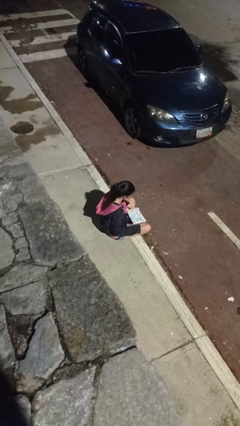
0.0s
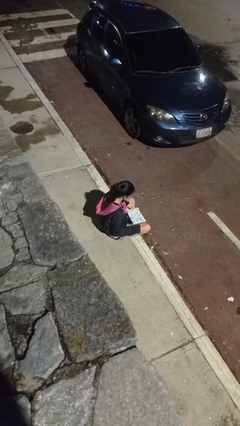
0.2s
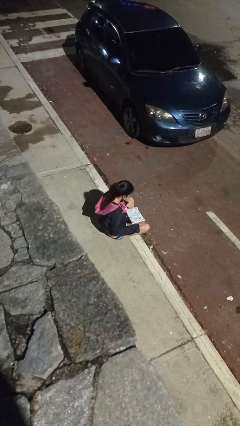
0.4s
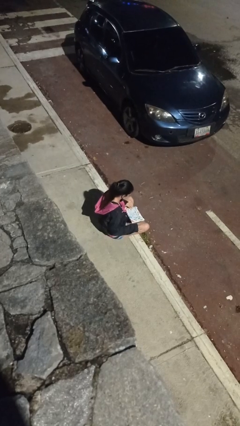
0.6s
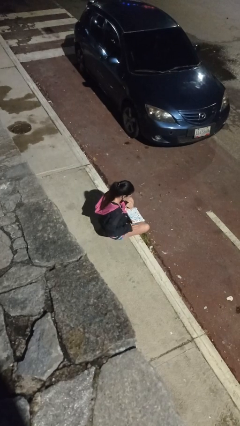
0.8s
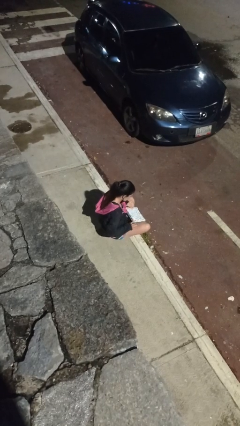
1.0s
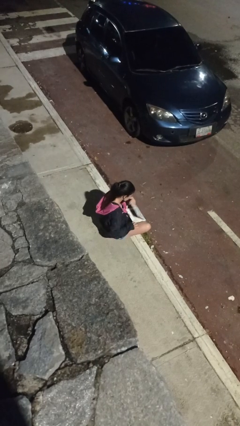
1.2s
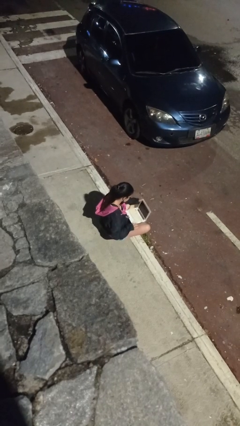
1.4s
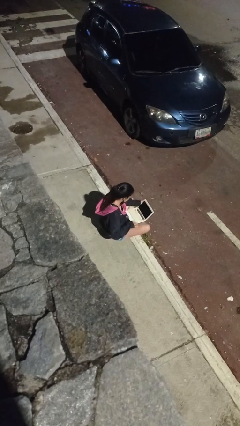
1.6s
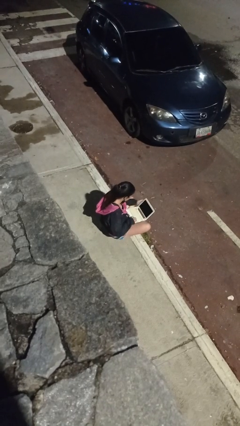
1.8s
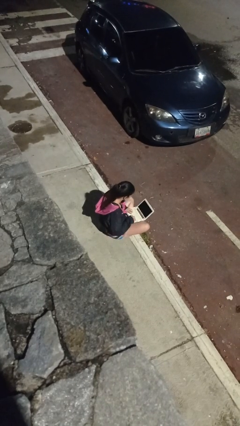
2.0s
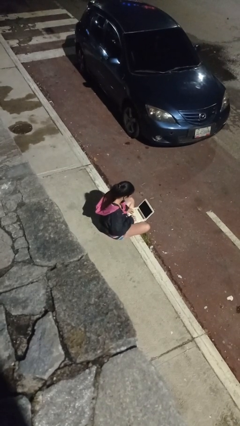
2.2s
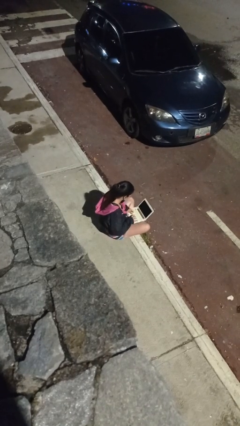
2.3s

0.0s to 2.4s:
person opens laptop

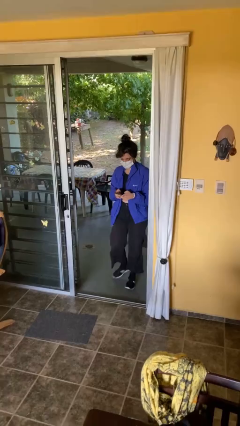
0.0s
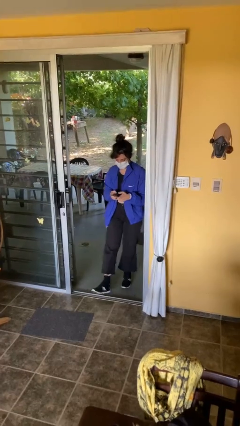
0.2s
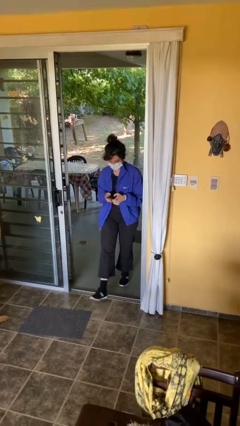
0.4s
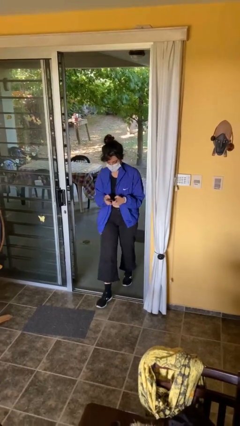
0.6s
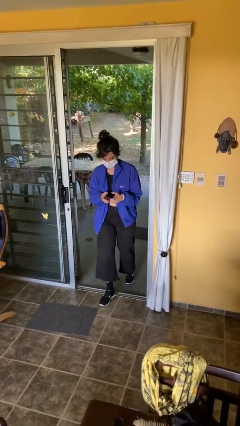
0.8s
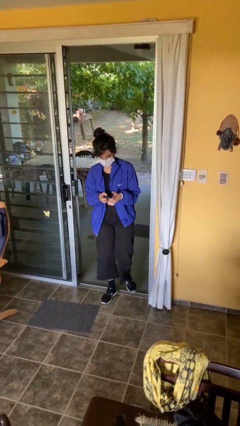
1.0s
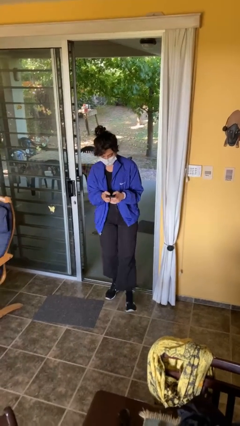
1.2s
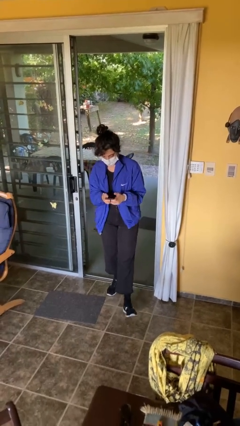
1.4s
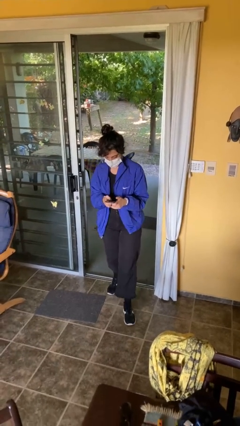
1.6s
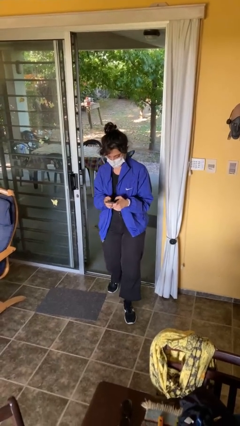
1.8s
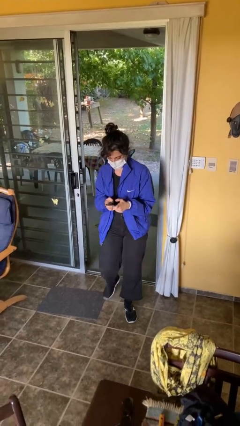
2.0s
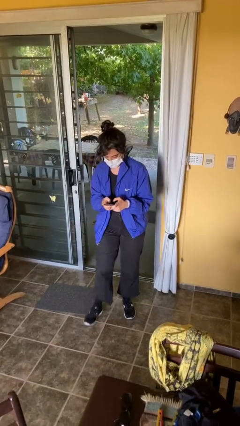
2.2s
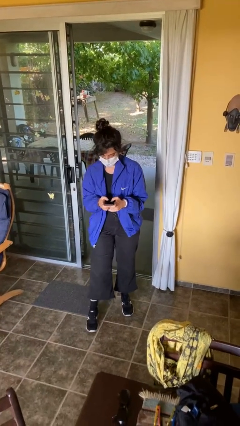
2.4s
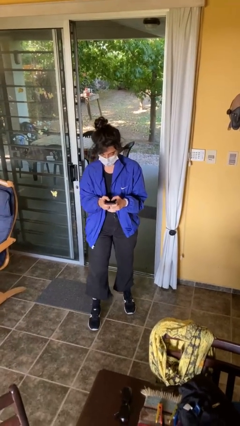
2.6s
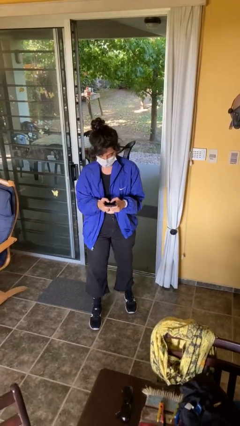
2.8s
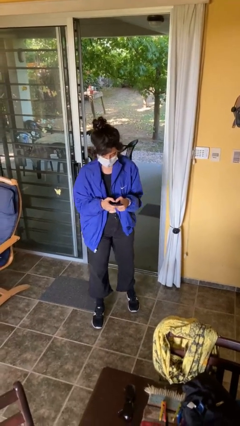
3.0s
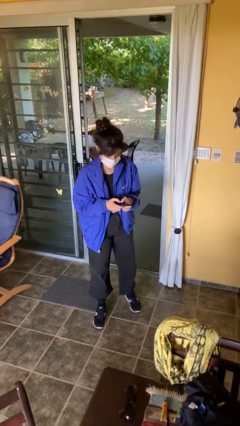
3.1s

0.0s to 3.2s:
person enters scene through structure

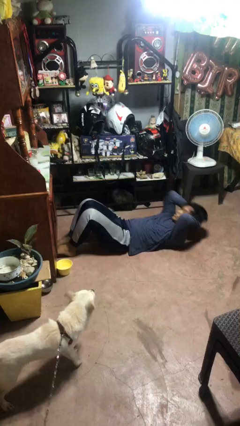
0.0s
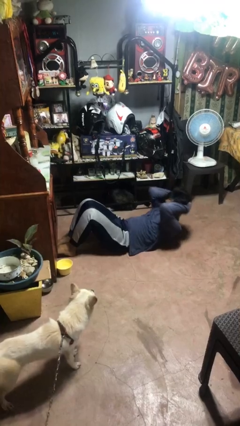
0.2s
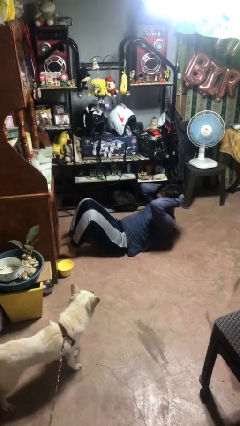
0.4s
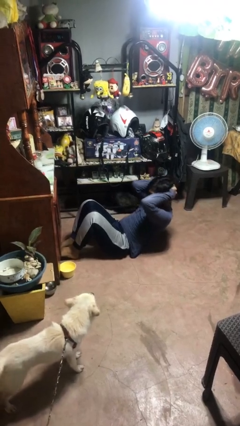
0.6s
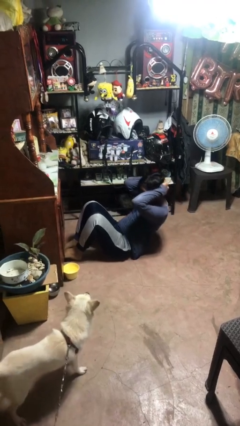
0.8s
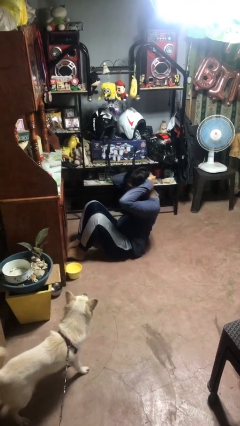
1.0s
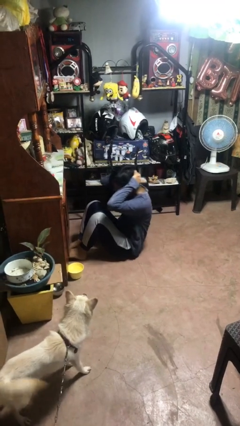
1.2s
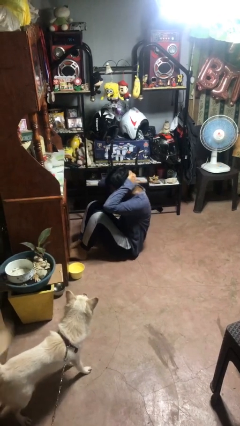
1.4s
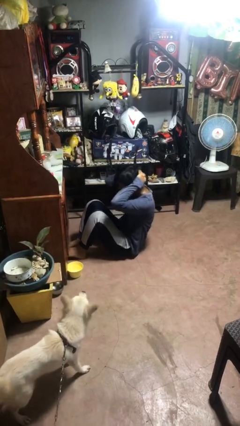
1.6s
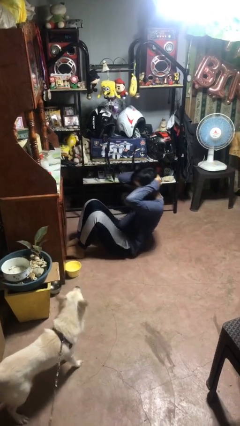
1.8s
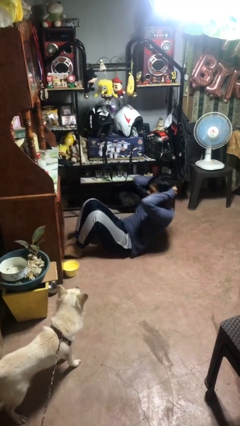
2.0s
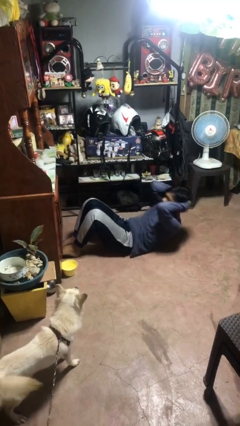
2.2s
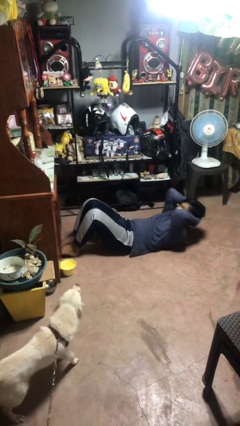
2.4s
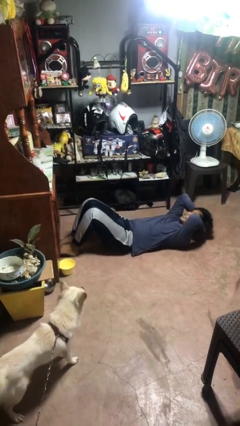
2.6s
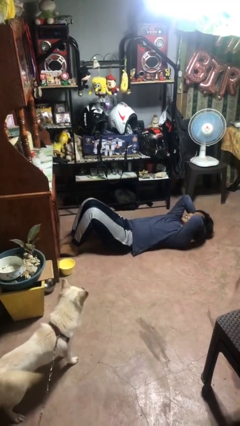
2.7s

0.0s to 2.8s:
person exercises with situp

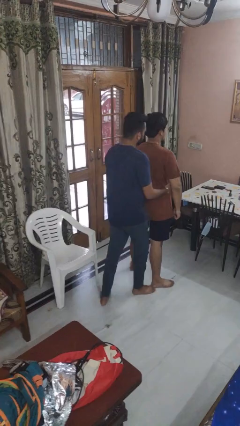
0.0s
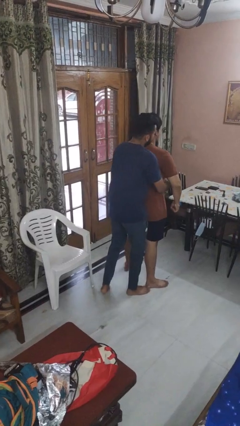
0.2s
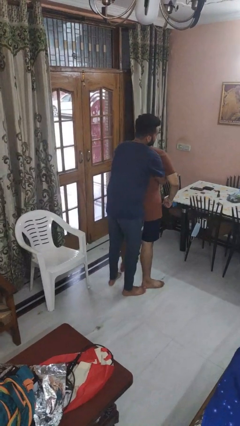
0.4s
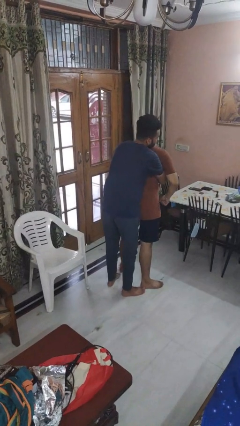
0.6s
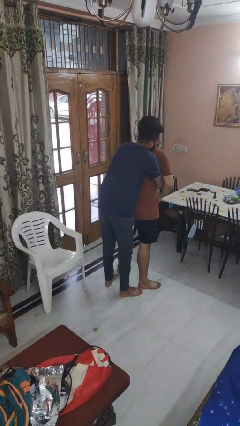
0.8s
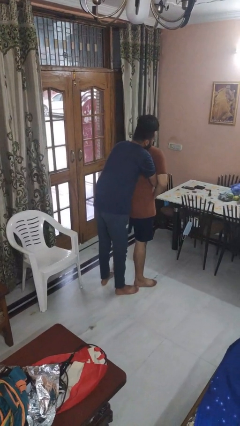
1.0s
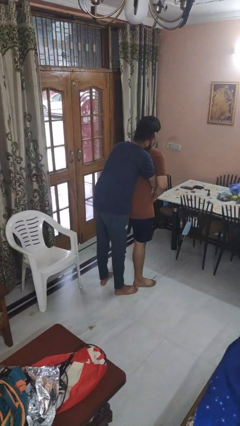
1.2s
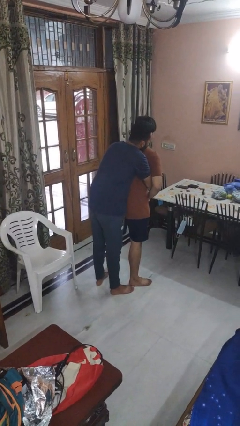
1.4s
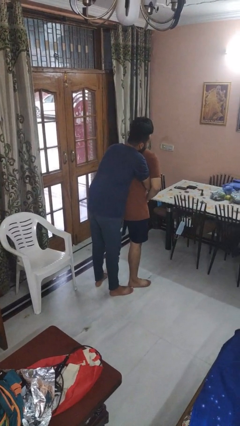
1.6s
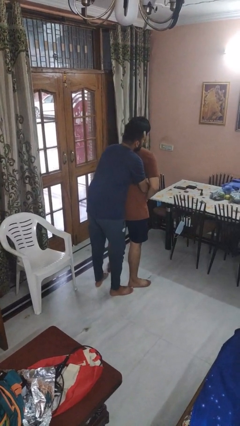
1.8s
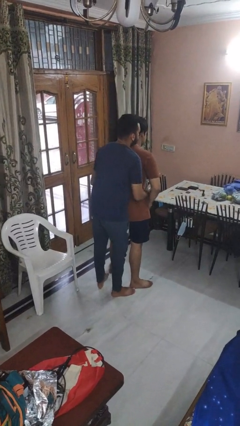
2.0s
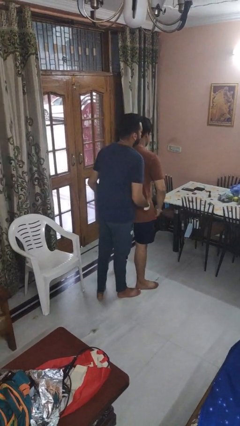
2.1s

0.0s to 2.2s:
person hugs person from behind

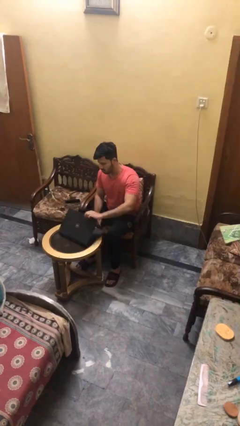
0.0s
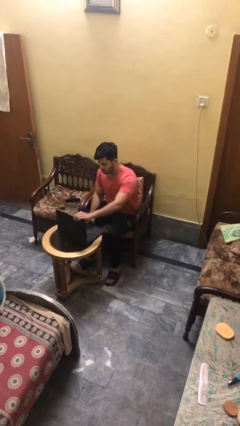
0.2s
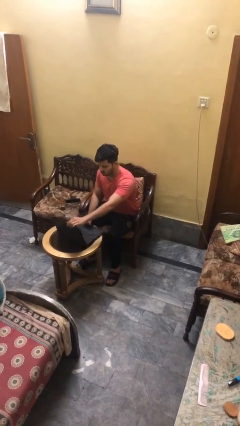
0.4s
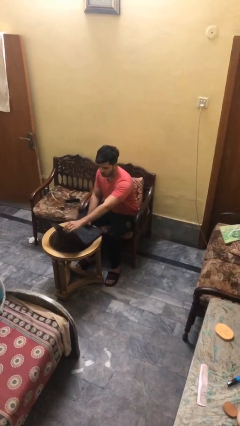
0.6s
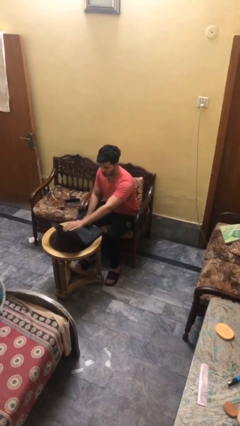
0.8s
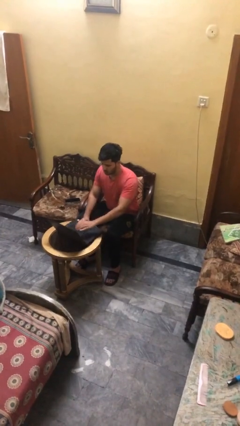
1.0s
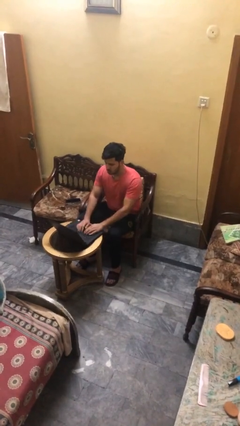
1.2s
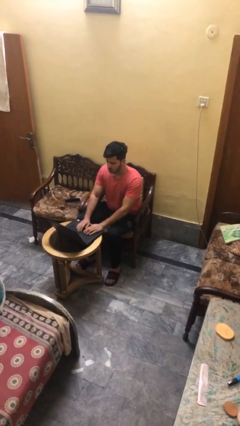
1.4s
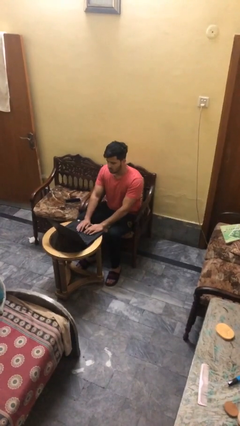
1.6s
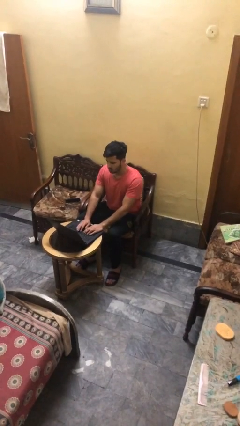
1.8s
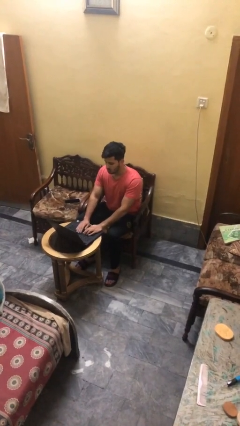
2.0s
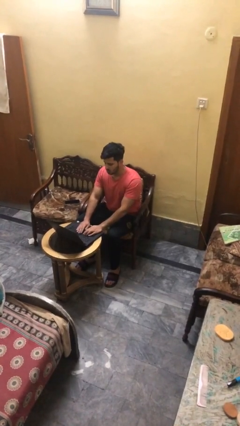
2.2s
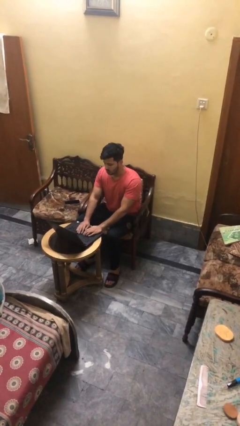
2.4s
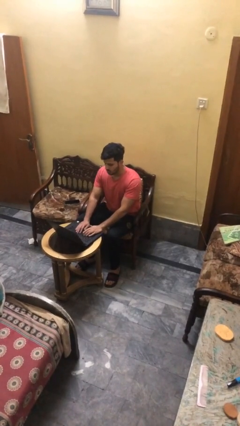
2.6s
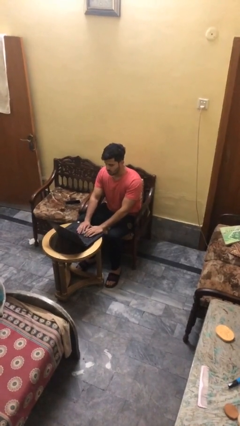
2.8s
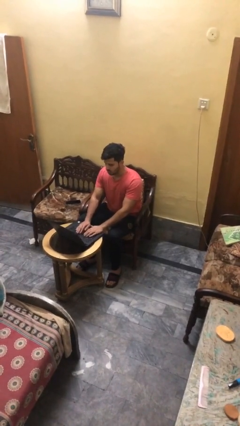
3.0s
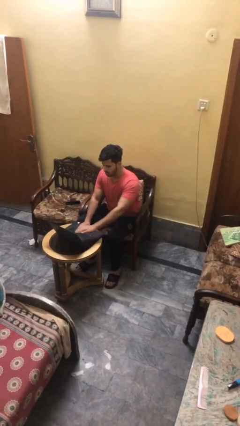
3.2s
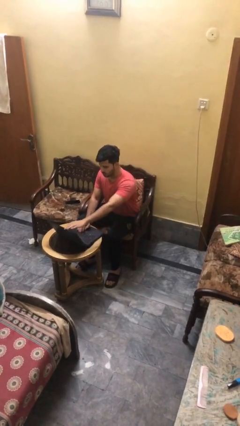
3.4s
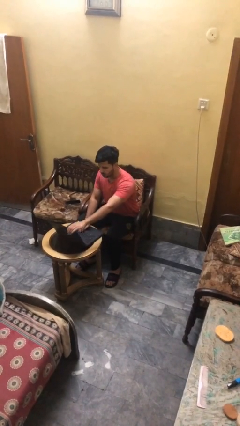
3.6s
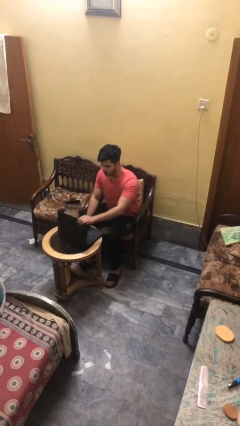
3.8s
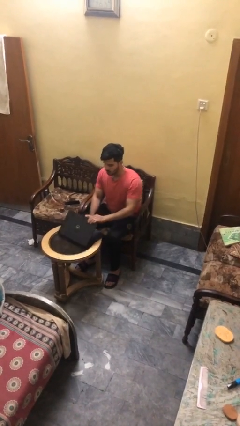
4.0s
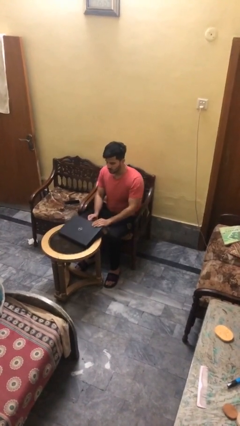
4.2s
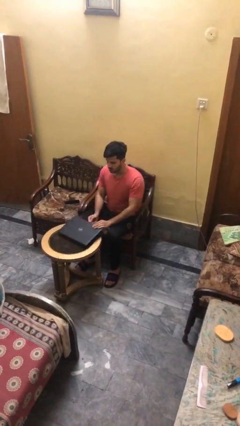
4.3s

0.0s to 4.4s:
person interacts with laptop

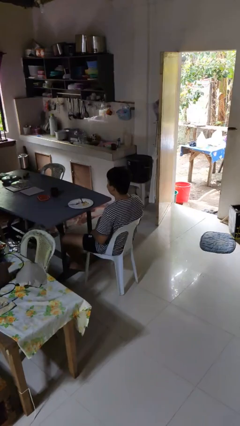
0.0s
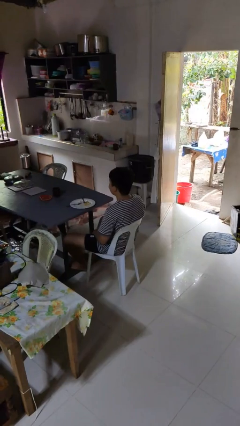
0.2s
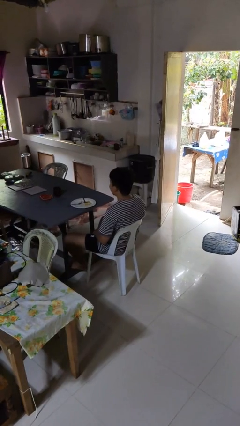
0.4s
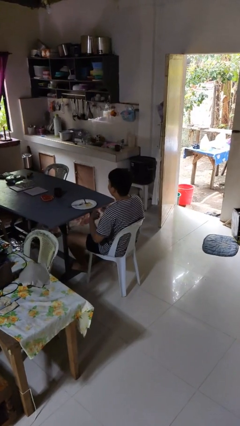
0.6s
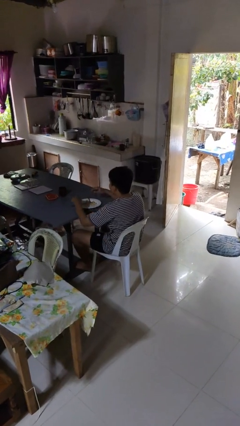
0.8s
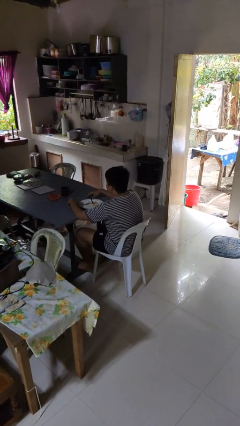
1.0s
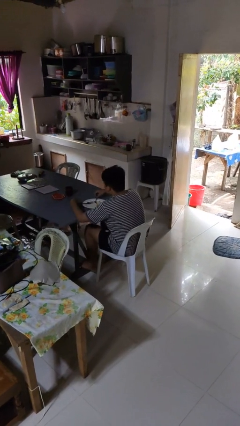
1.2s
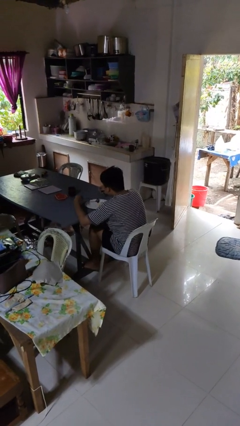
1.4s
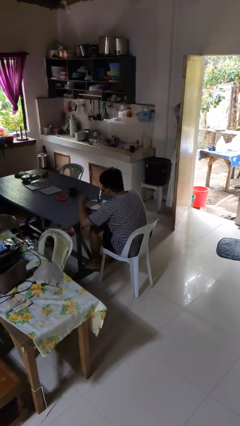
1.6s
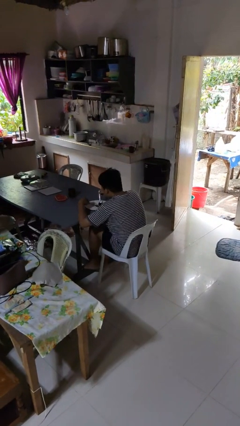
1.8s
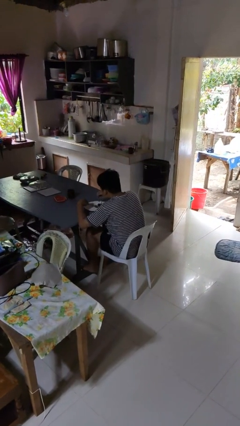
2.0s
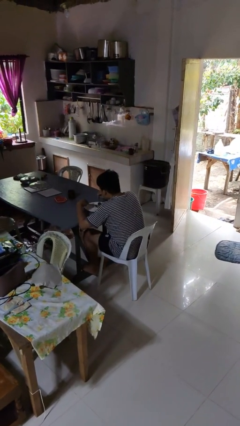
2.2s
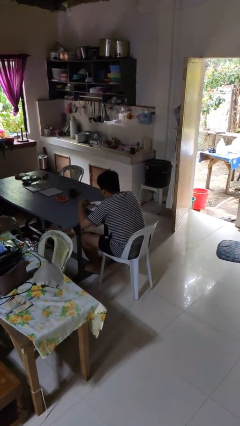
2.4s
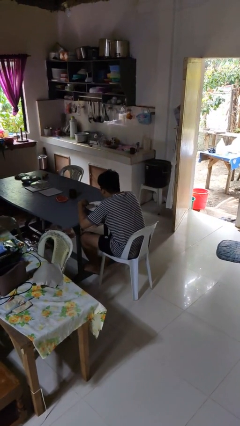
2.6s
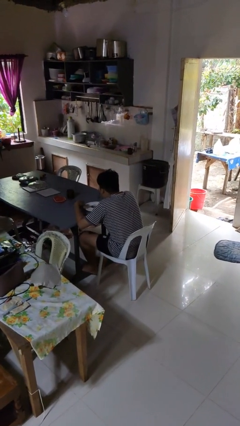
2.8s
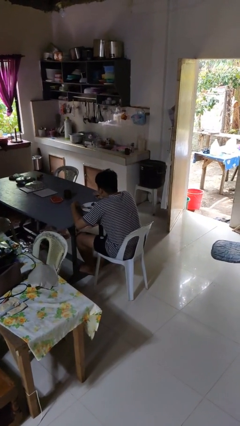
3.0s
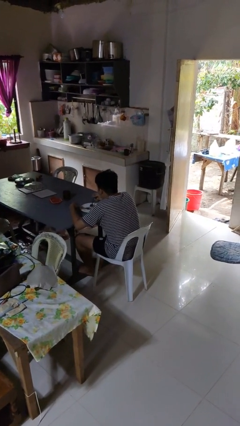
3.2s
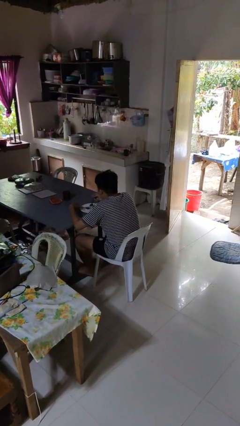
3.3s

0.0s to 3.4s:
person eats with utensil
